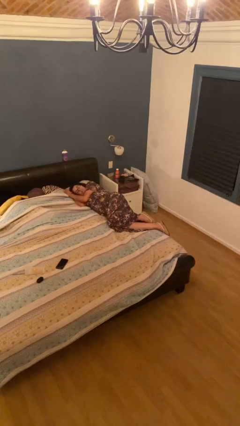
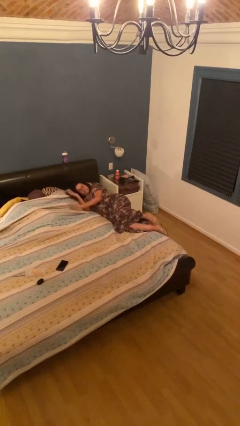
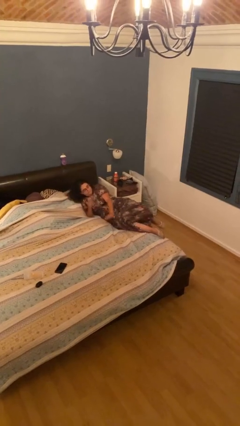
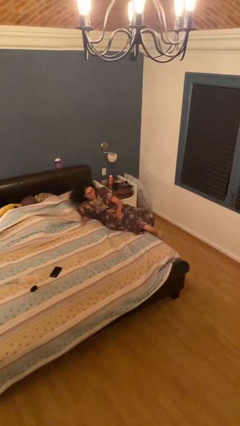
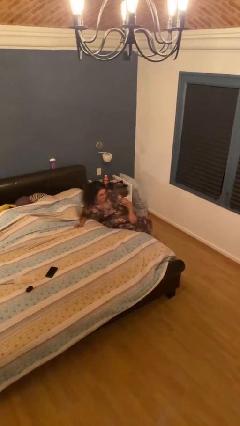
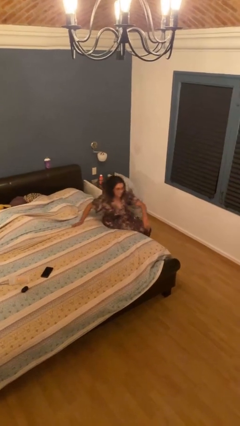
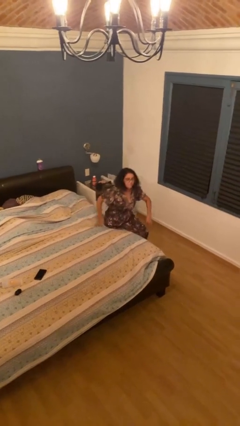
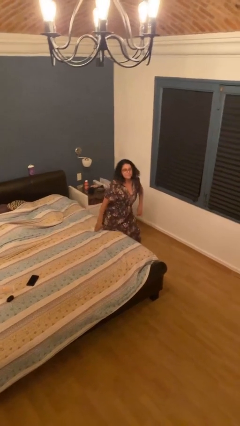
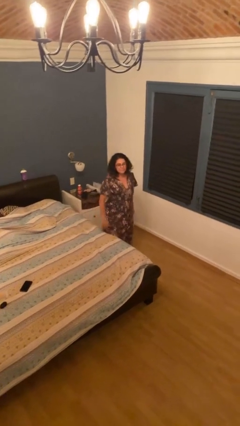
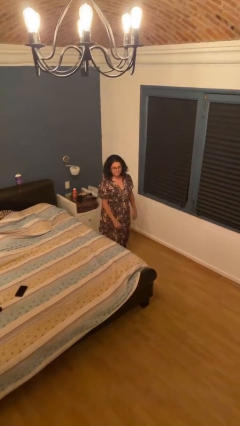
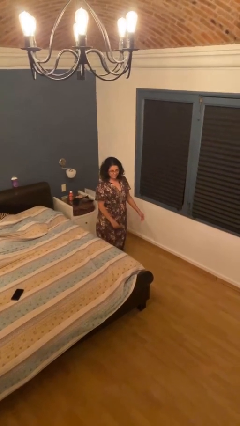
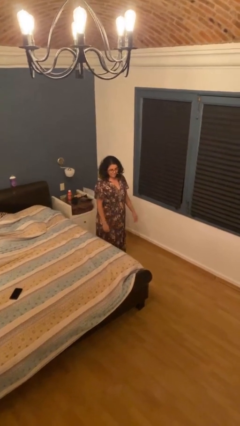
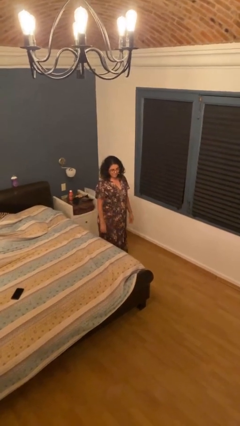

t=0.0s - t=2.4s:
person stands up

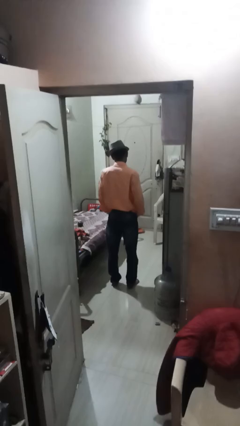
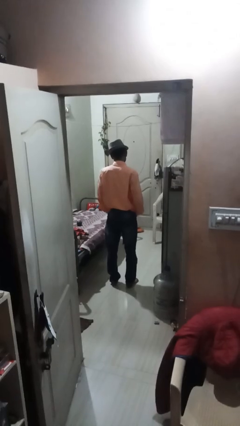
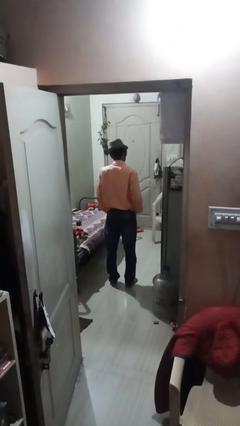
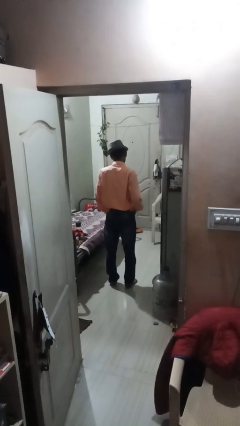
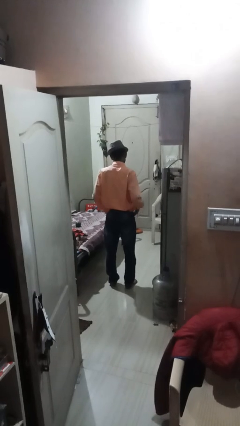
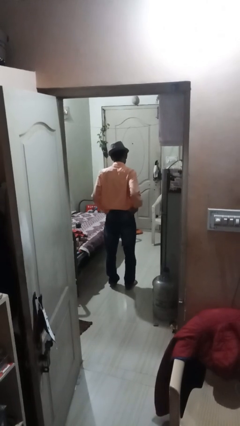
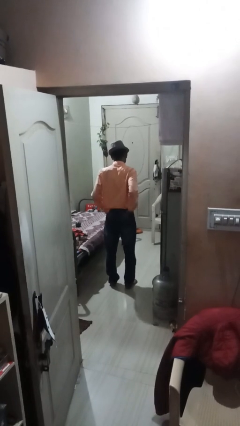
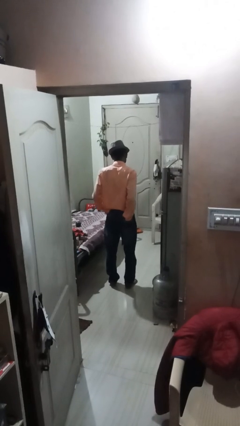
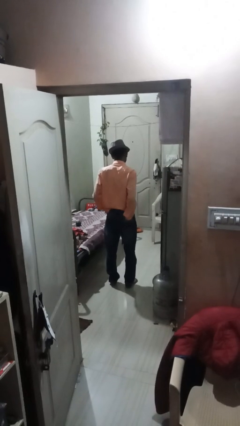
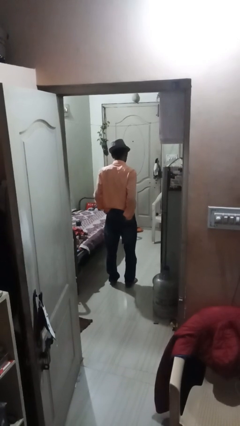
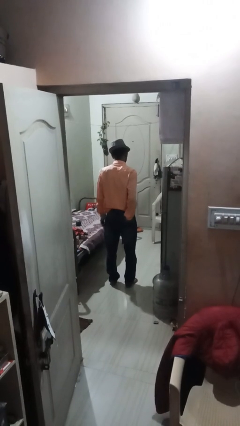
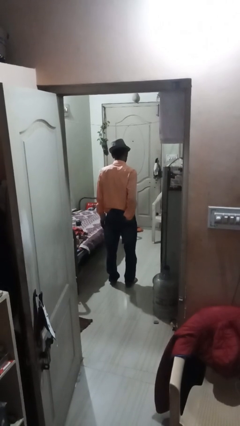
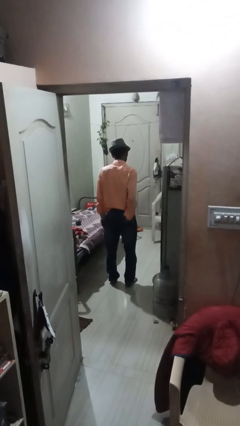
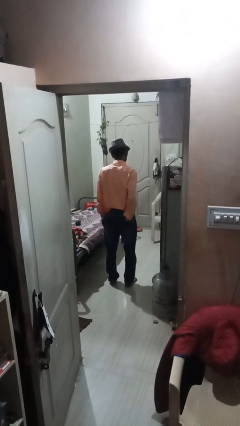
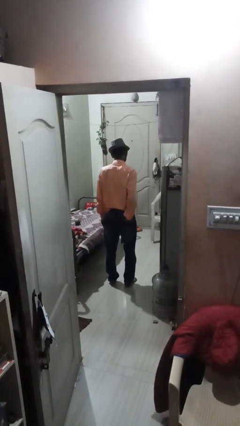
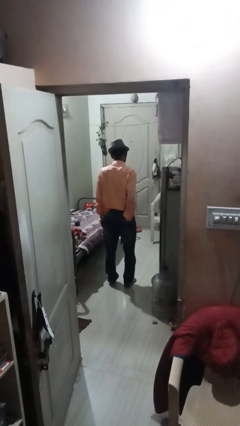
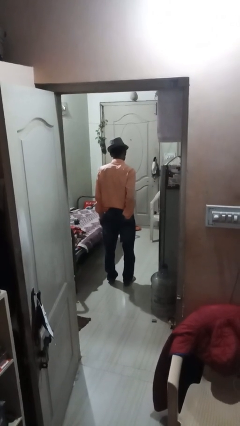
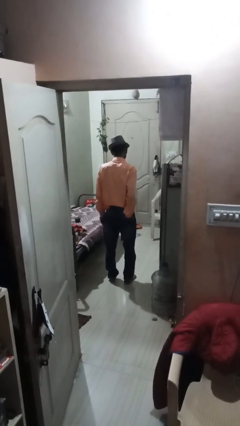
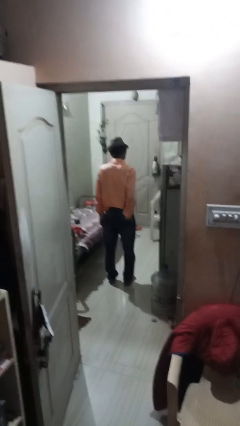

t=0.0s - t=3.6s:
person puts hands in back pockets

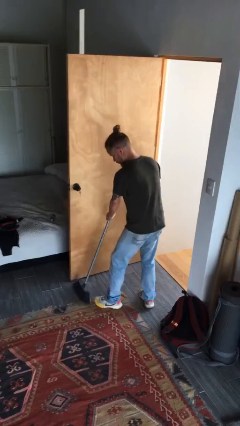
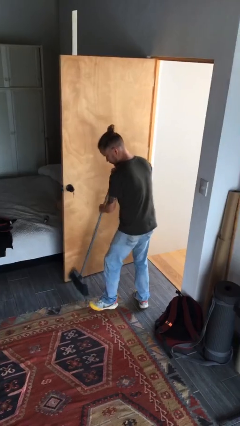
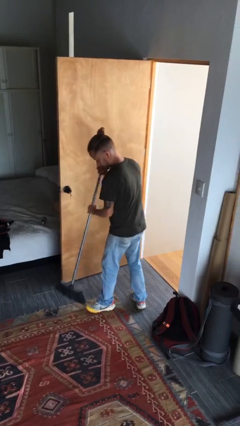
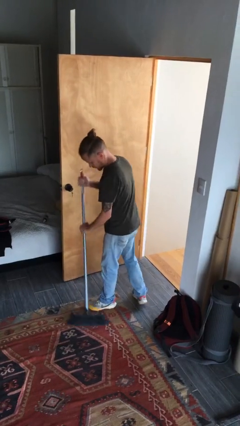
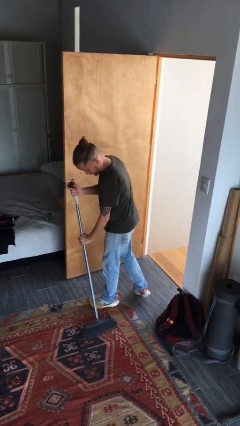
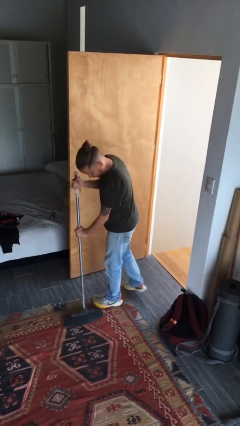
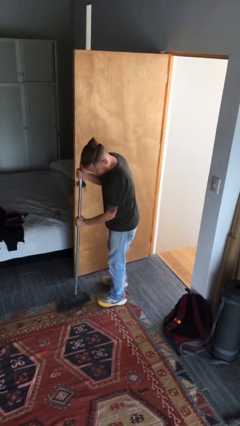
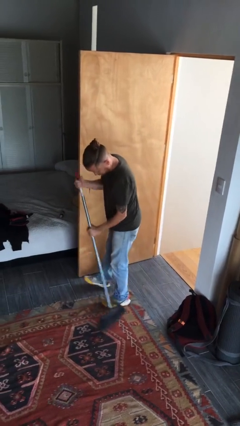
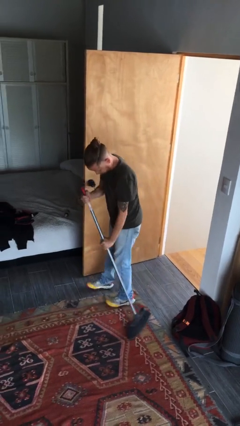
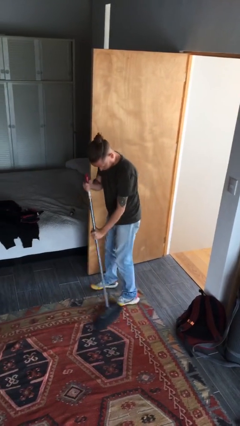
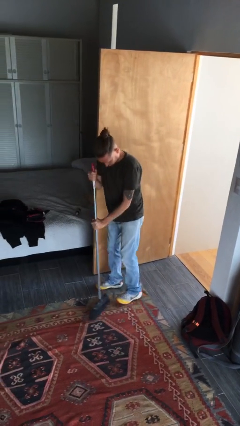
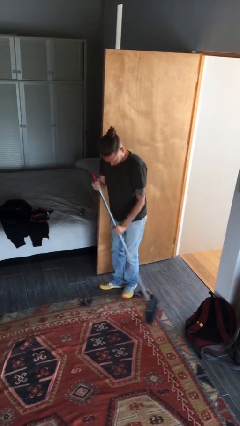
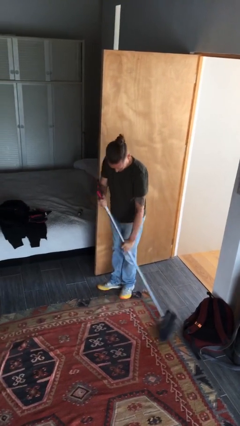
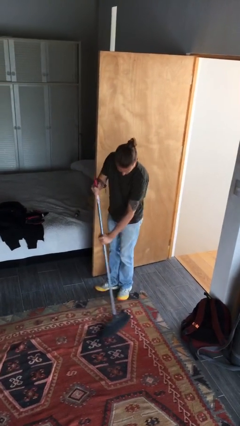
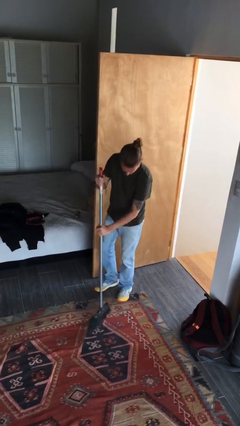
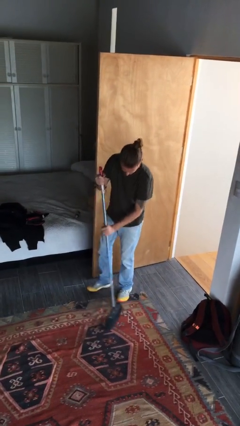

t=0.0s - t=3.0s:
person sweeps floor

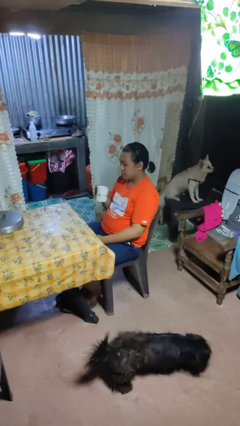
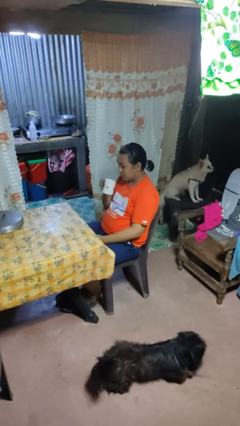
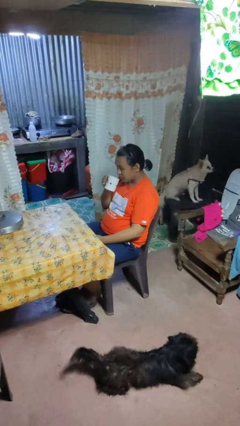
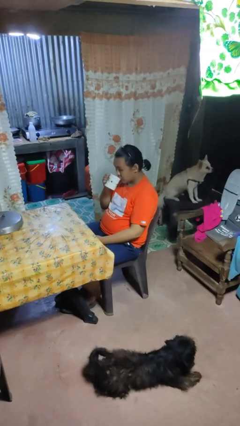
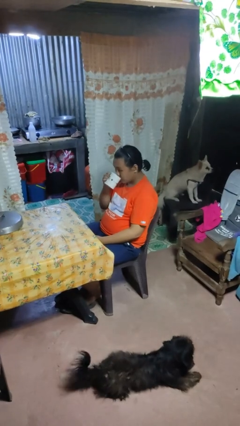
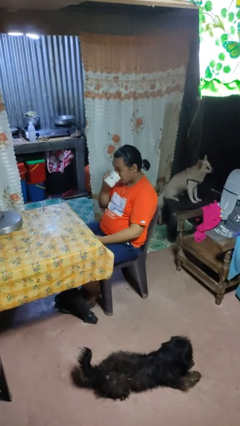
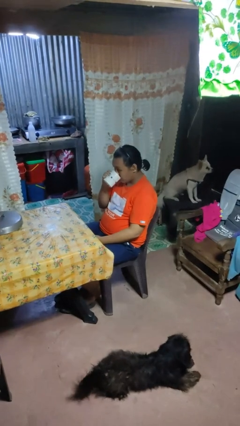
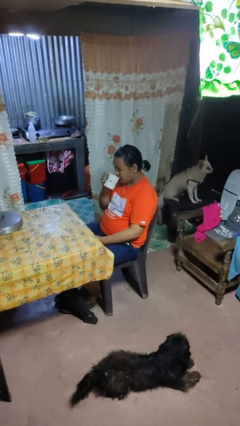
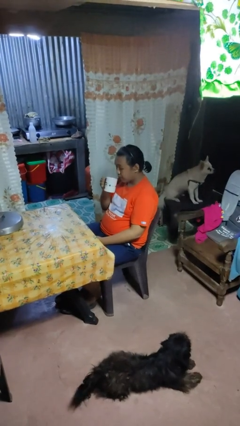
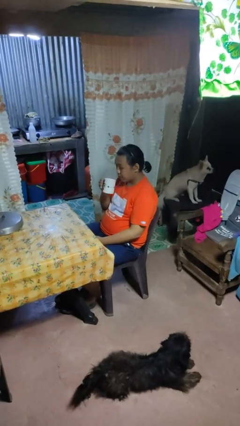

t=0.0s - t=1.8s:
person drinks from mug

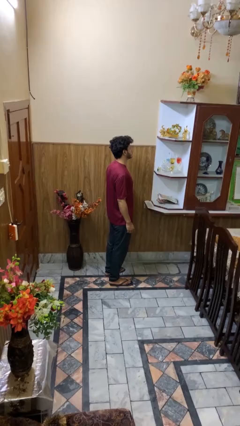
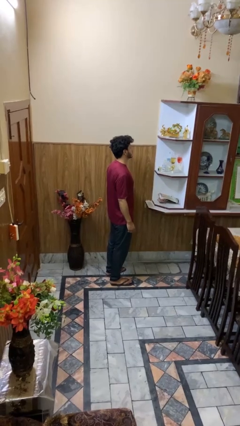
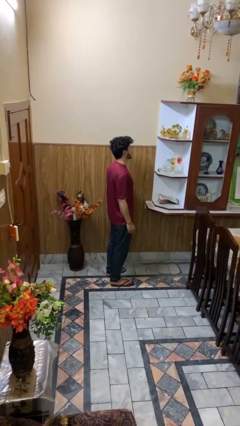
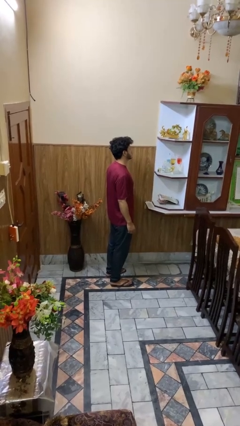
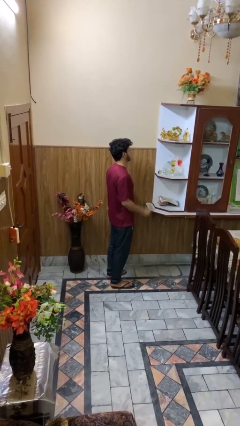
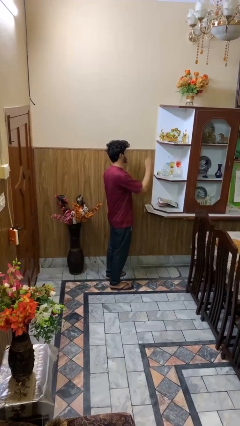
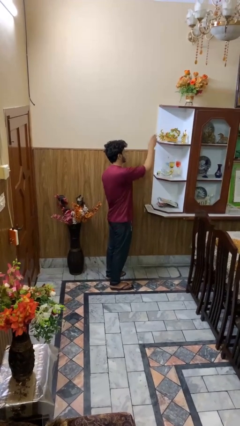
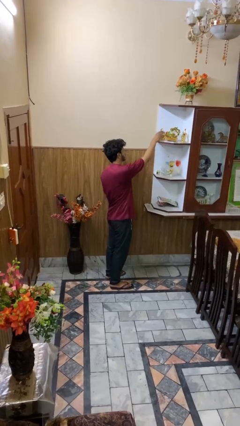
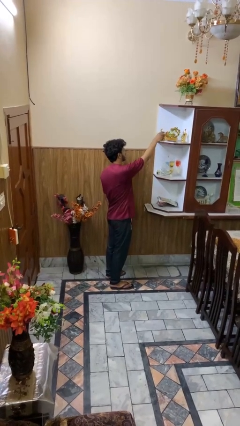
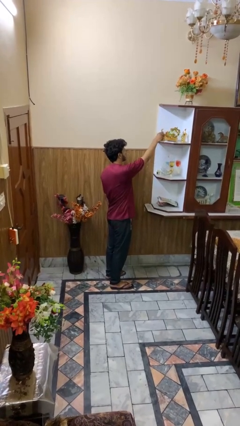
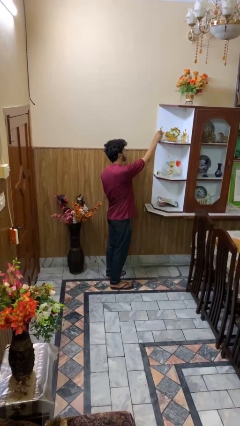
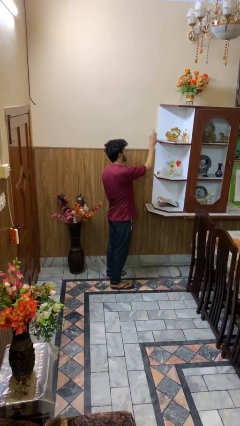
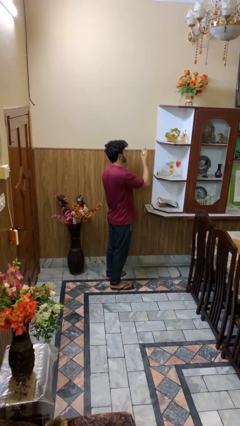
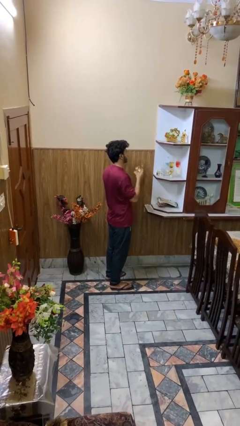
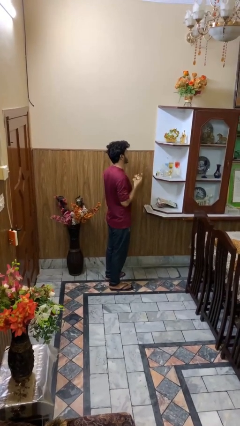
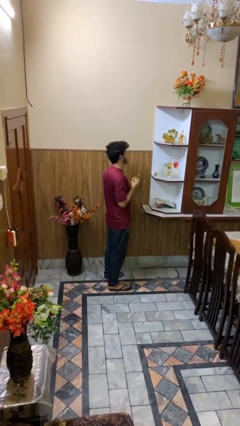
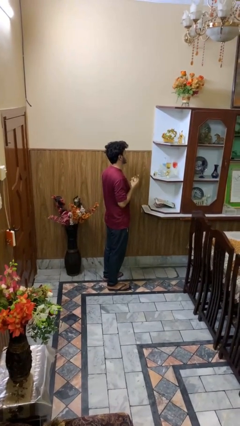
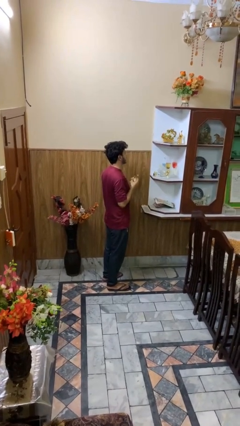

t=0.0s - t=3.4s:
person picks up object from shelf

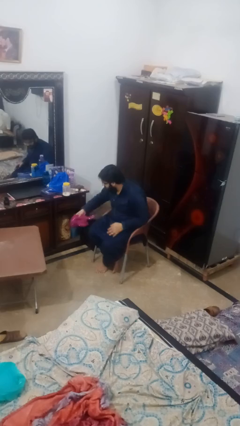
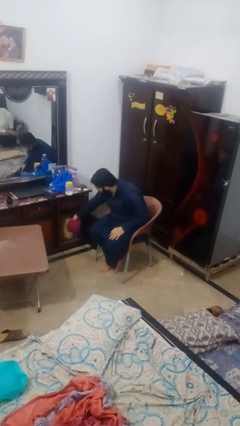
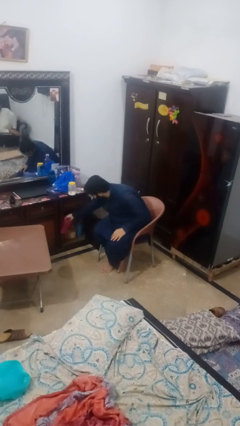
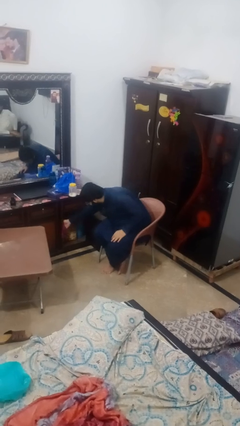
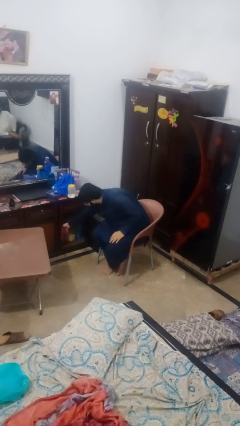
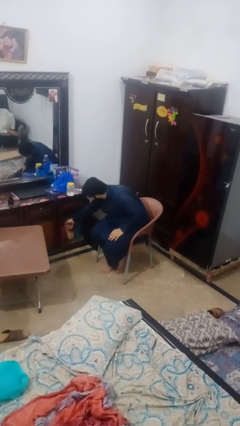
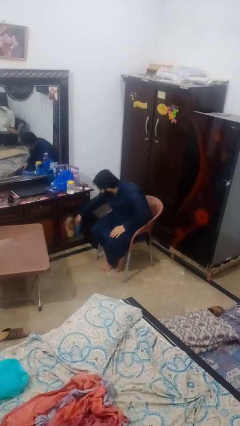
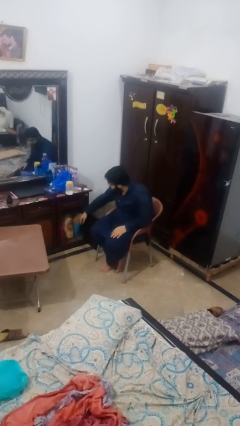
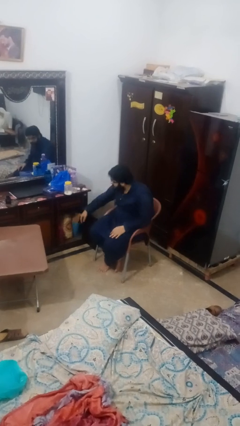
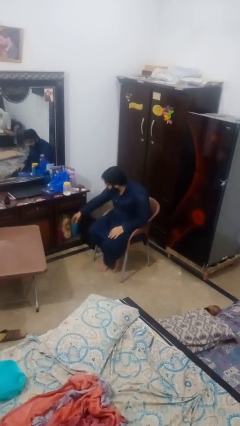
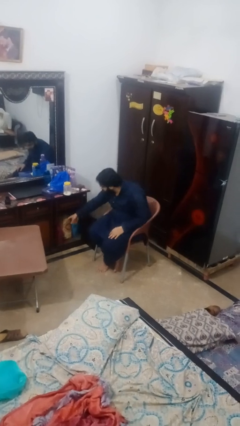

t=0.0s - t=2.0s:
person puts clothes into dresser

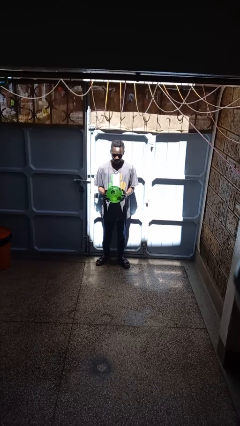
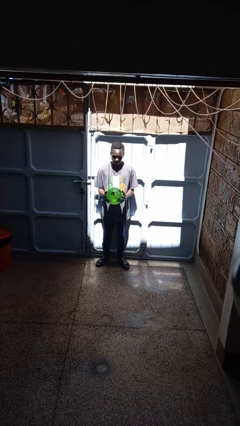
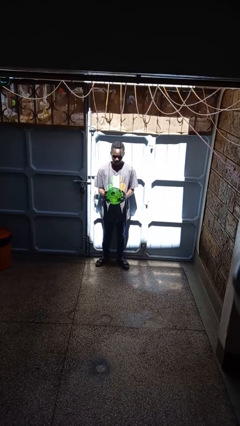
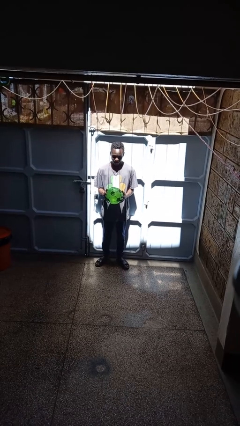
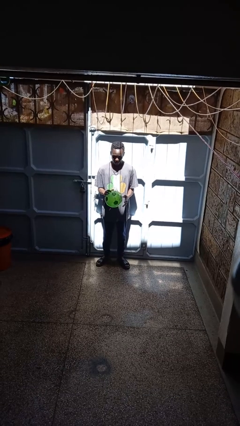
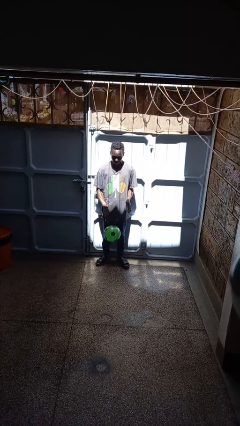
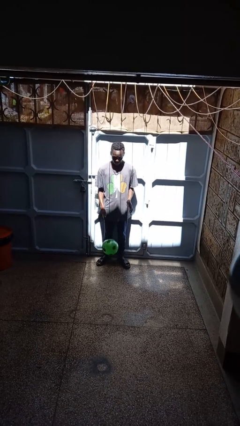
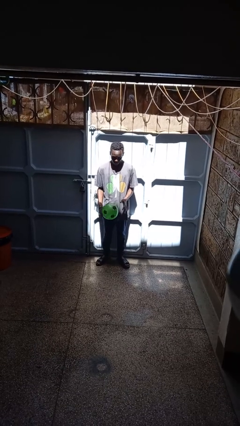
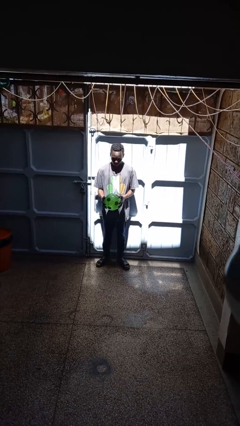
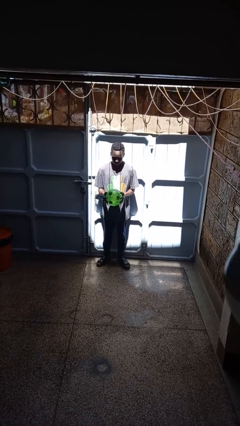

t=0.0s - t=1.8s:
person bounces ball on floor
